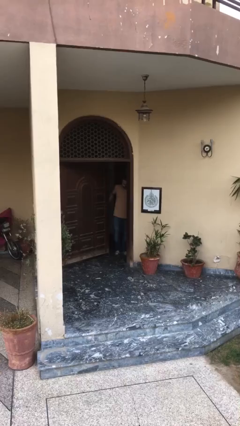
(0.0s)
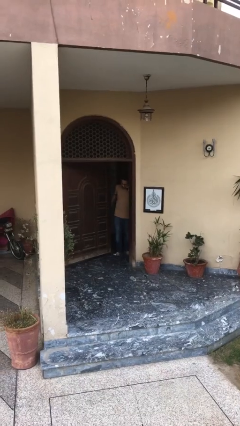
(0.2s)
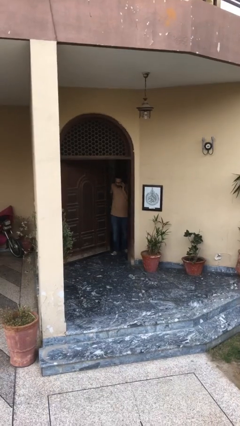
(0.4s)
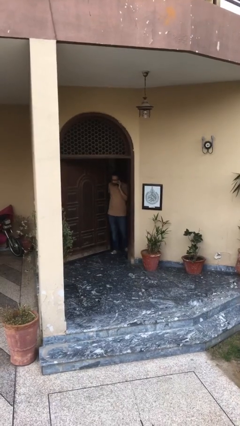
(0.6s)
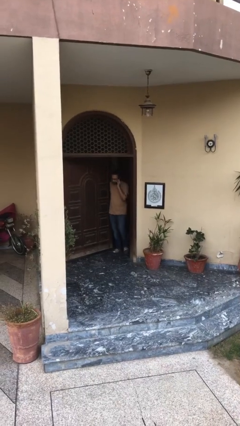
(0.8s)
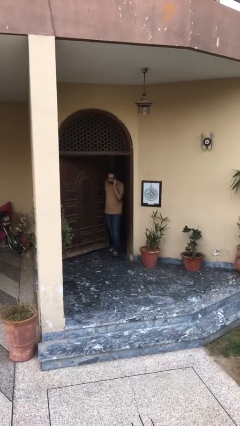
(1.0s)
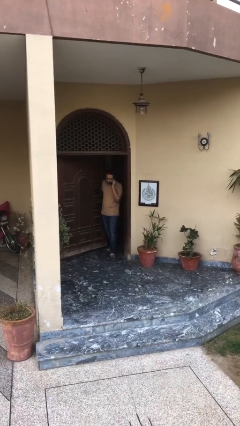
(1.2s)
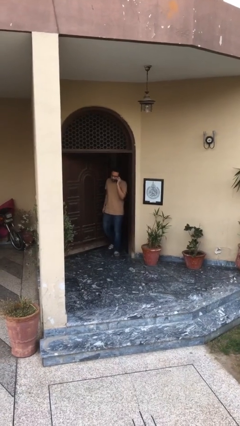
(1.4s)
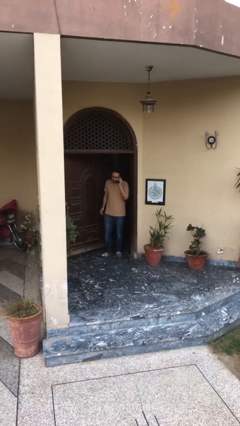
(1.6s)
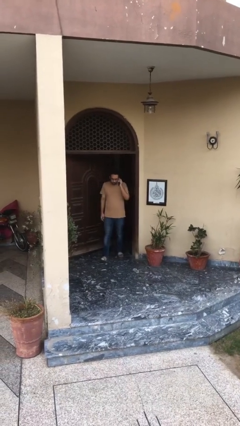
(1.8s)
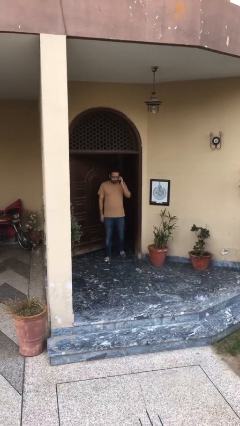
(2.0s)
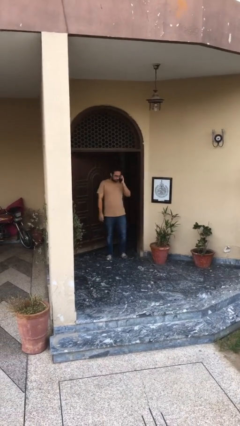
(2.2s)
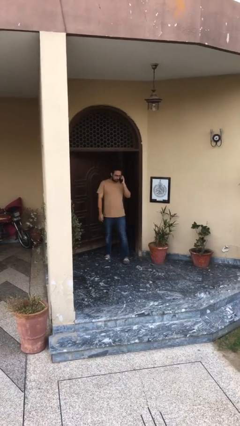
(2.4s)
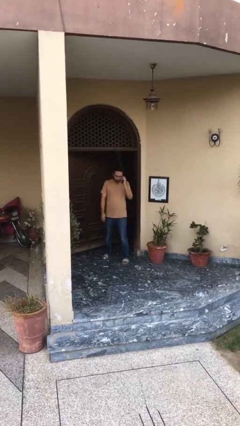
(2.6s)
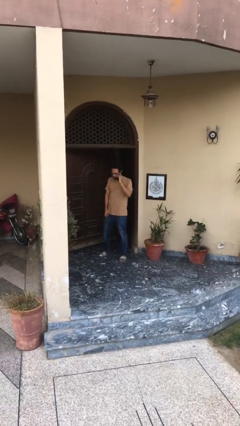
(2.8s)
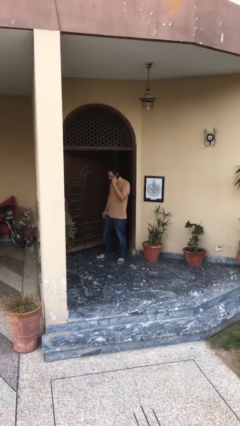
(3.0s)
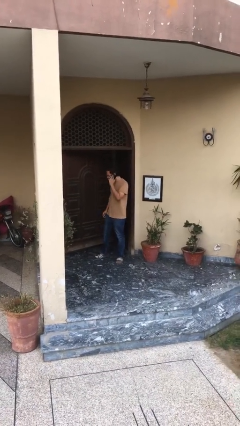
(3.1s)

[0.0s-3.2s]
person enters scene through structure

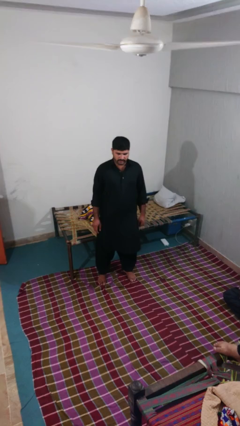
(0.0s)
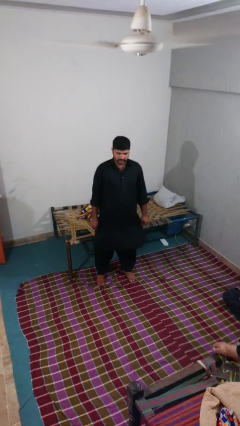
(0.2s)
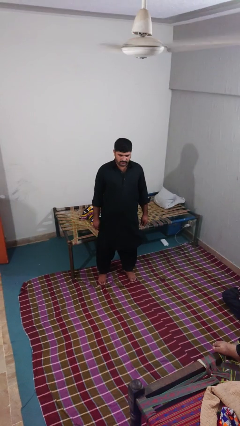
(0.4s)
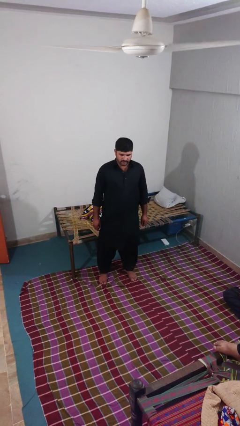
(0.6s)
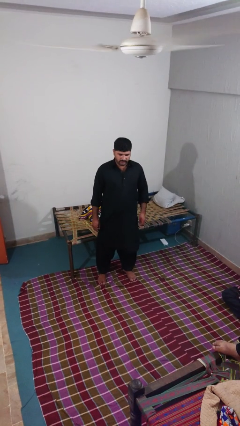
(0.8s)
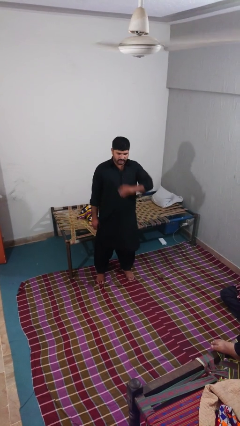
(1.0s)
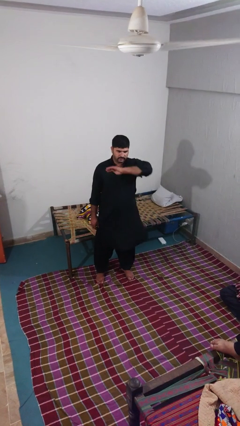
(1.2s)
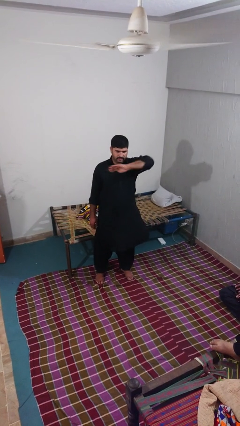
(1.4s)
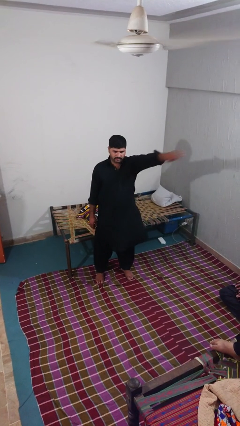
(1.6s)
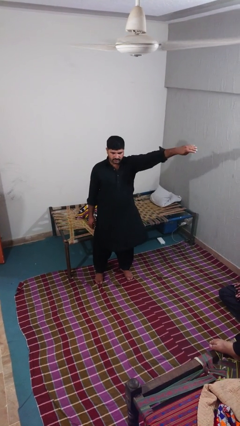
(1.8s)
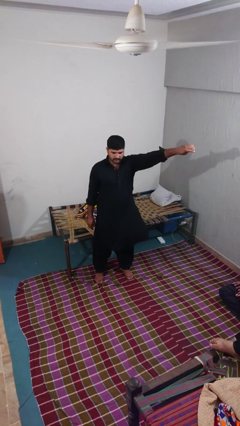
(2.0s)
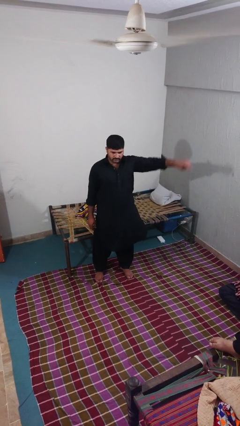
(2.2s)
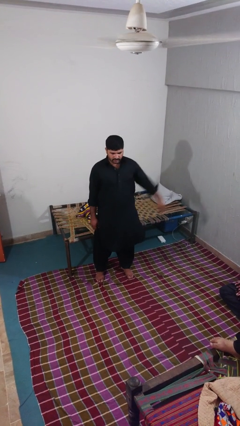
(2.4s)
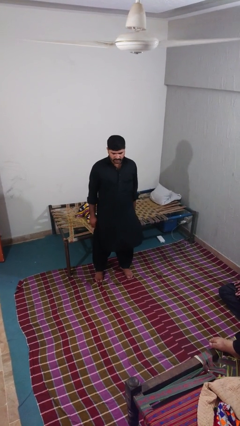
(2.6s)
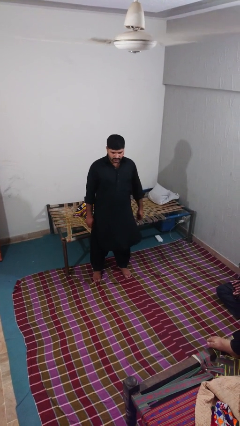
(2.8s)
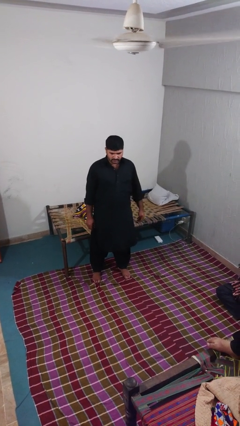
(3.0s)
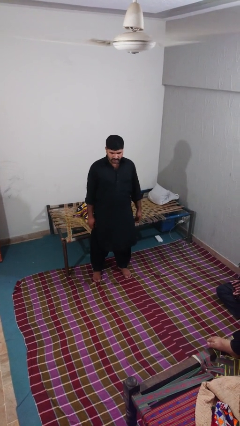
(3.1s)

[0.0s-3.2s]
person gestures swipe left

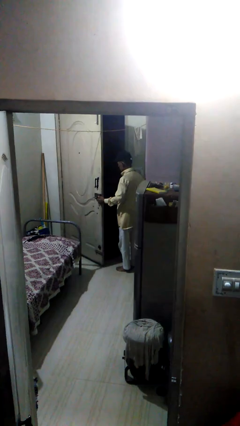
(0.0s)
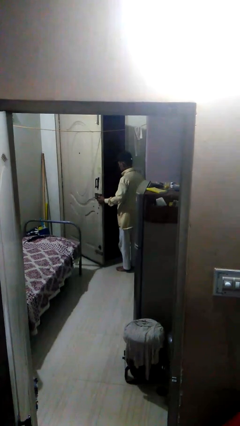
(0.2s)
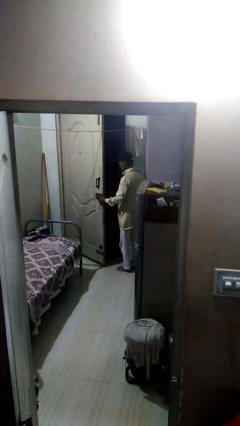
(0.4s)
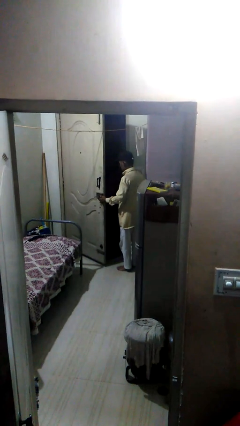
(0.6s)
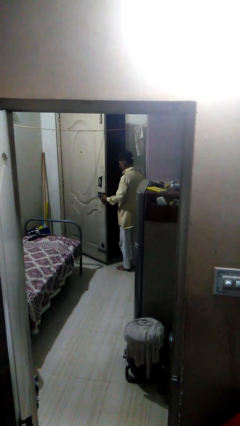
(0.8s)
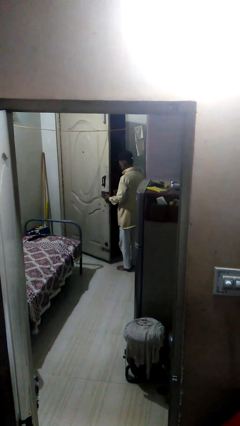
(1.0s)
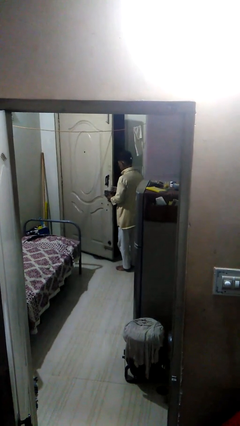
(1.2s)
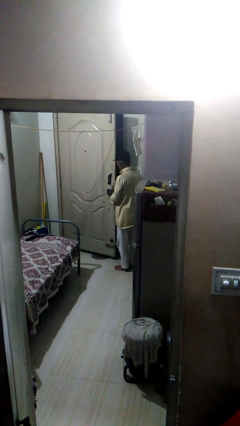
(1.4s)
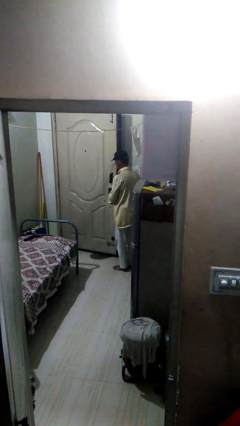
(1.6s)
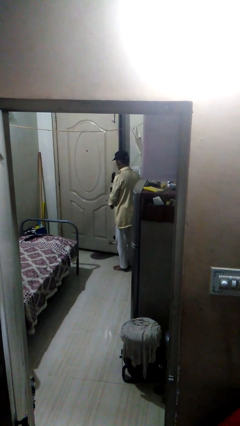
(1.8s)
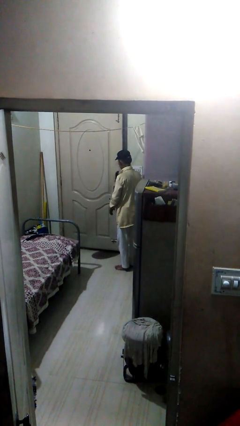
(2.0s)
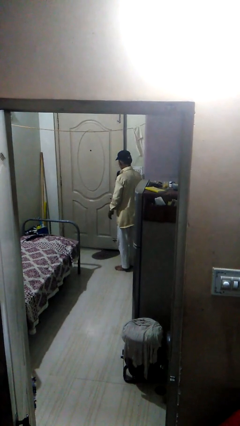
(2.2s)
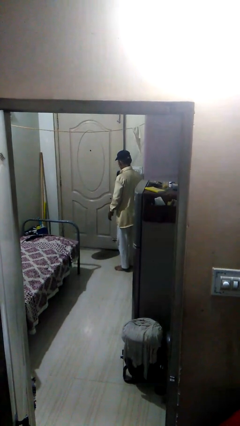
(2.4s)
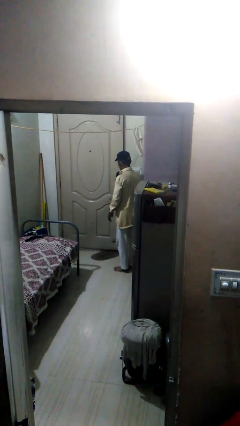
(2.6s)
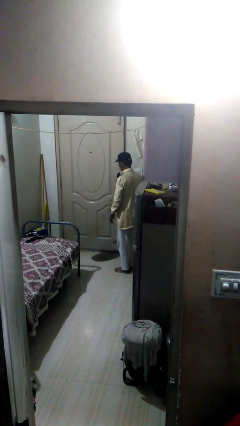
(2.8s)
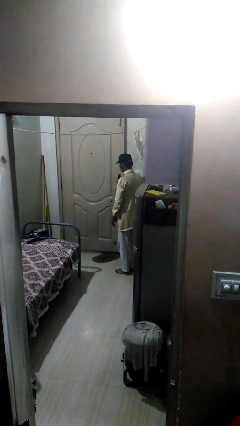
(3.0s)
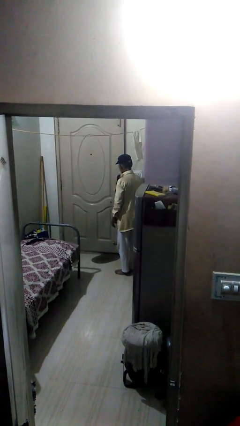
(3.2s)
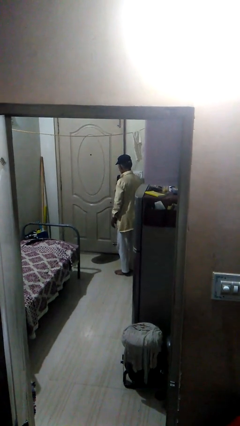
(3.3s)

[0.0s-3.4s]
person closes facility door

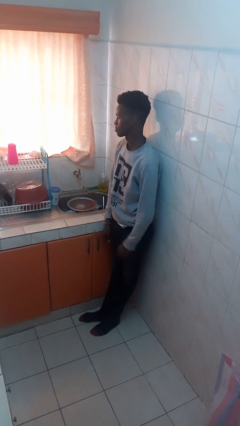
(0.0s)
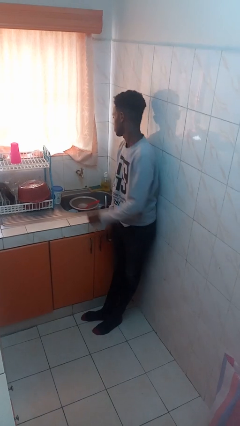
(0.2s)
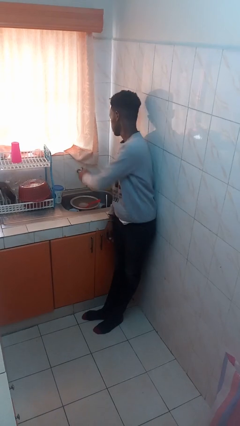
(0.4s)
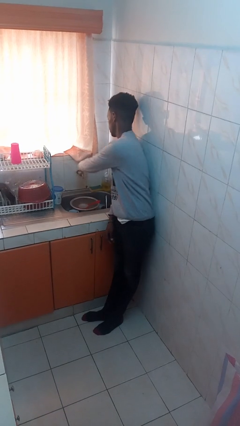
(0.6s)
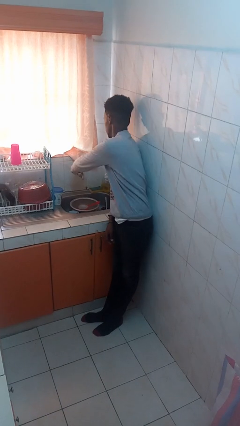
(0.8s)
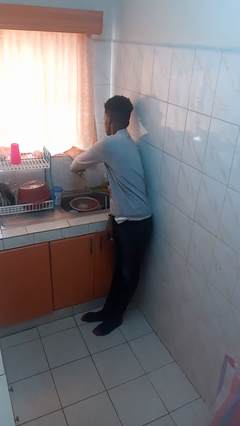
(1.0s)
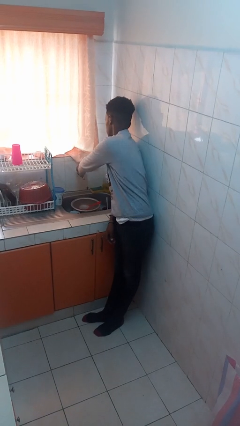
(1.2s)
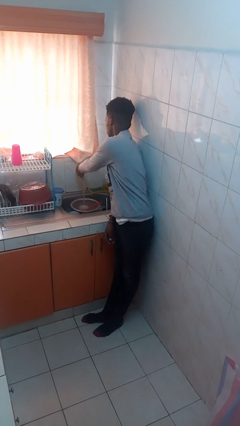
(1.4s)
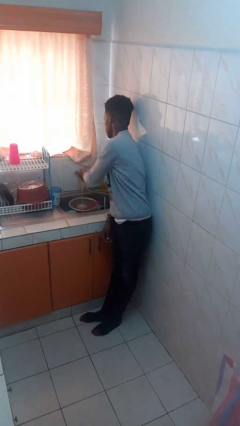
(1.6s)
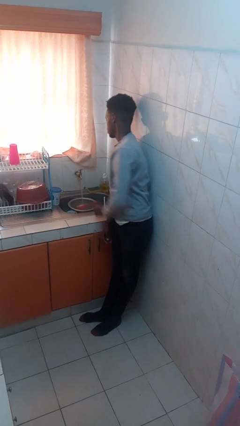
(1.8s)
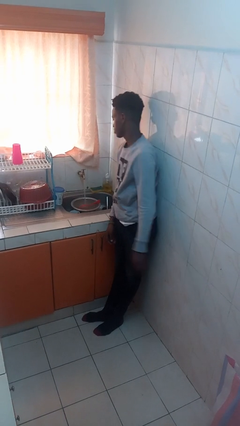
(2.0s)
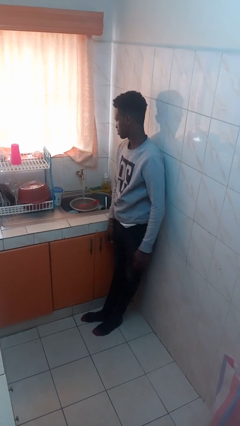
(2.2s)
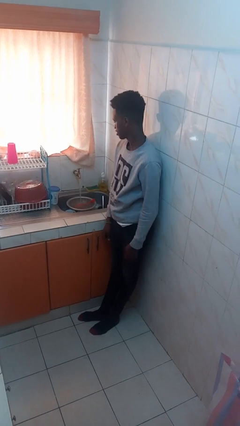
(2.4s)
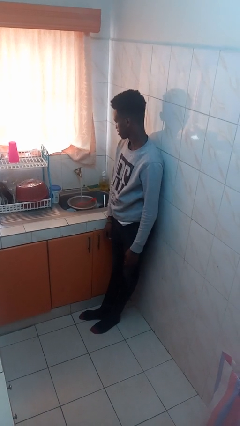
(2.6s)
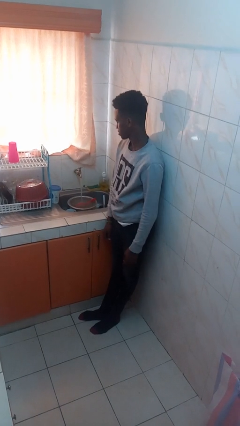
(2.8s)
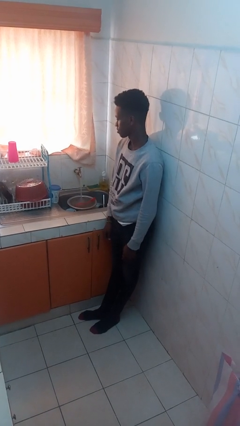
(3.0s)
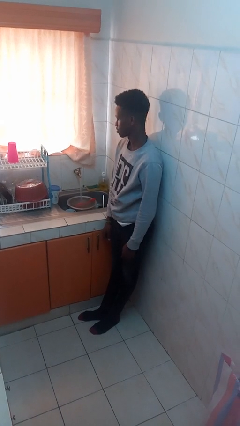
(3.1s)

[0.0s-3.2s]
person turns on faucet

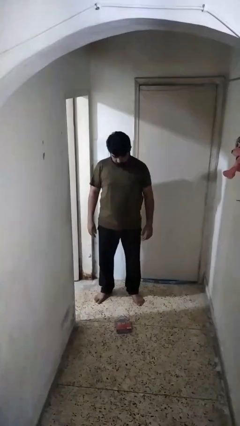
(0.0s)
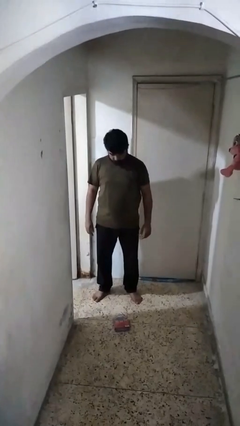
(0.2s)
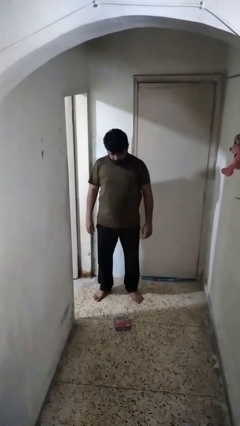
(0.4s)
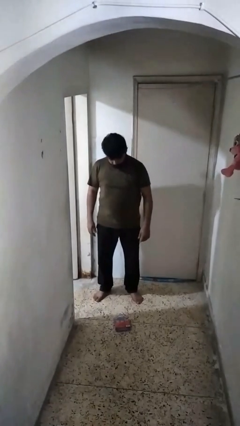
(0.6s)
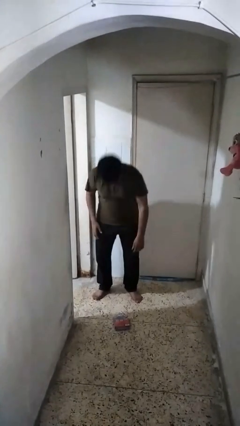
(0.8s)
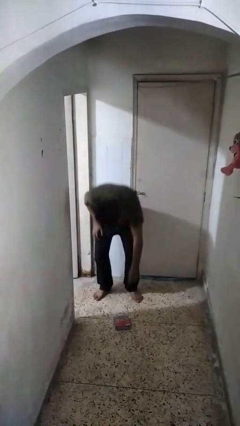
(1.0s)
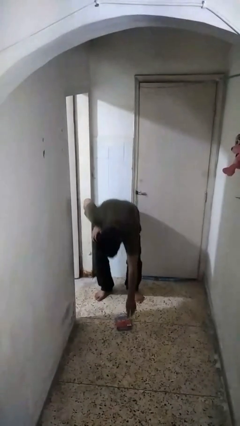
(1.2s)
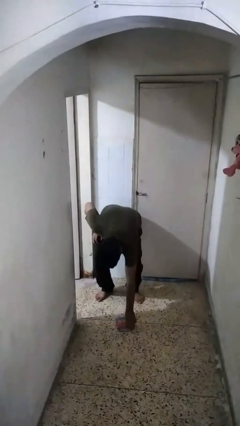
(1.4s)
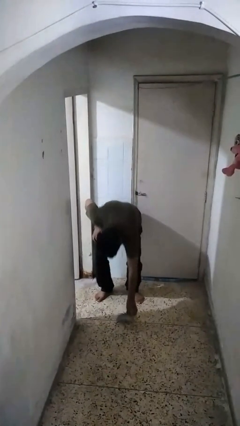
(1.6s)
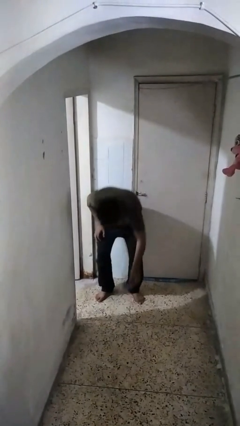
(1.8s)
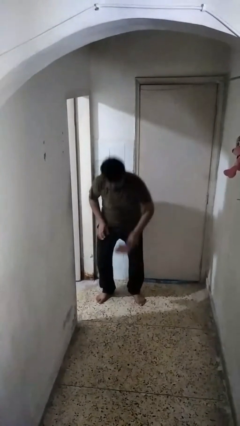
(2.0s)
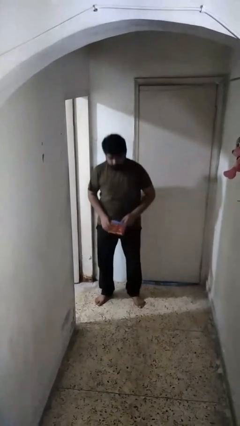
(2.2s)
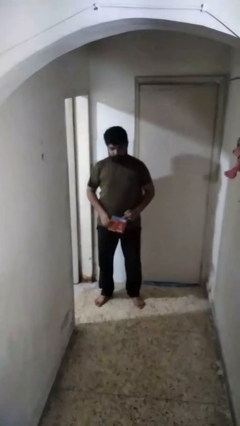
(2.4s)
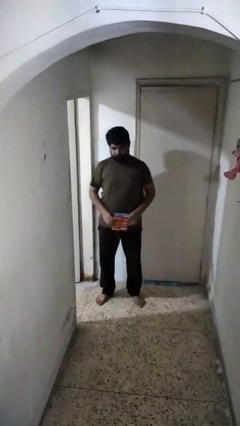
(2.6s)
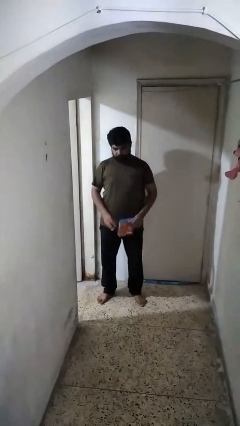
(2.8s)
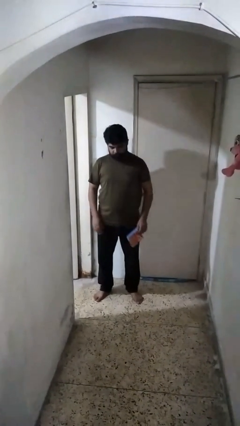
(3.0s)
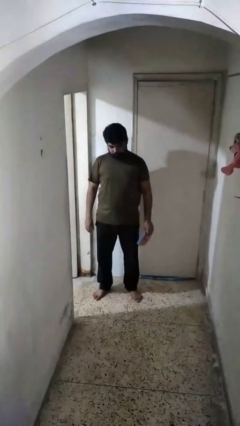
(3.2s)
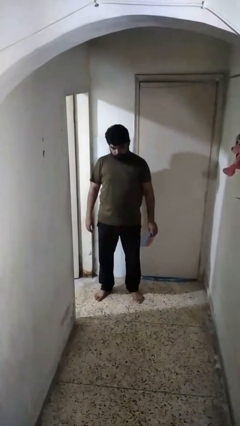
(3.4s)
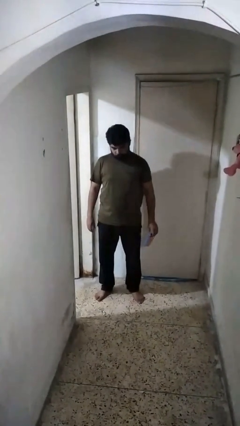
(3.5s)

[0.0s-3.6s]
person picks up object from floor

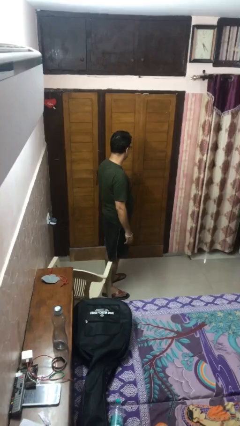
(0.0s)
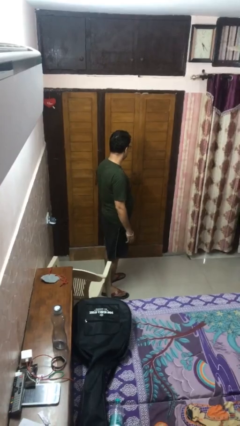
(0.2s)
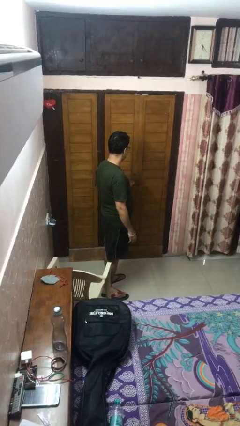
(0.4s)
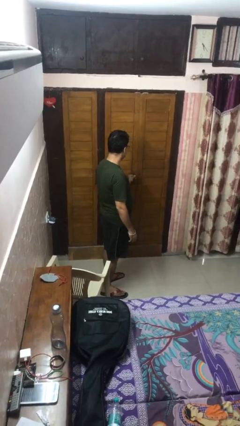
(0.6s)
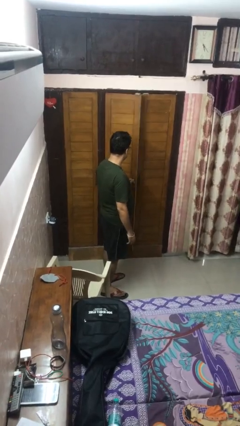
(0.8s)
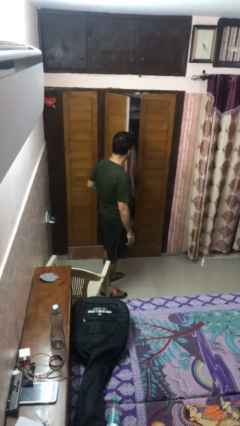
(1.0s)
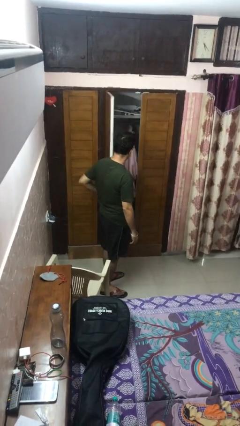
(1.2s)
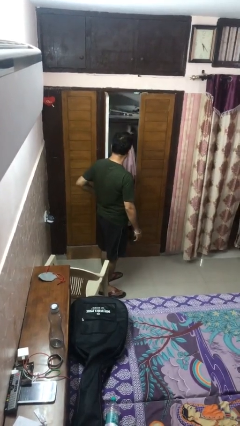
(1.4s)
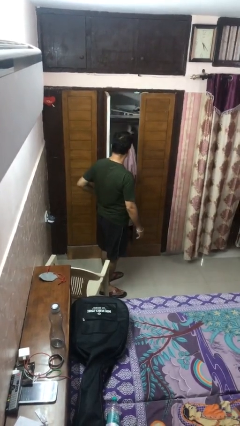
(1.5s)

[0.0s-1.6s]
person opens closet door
